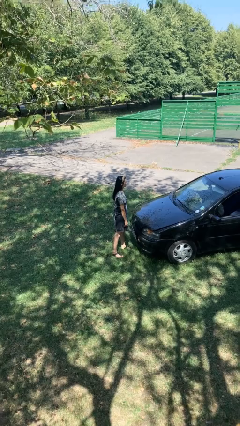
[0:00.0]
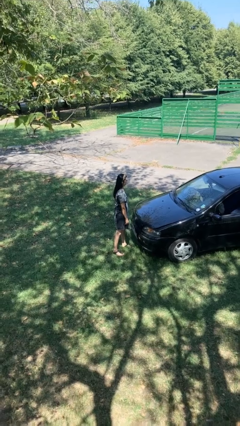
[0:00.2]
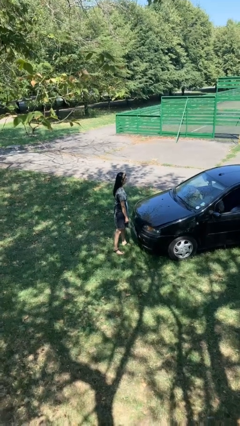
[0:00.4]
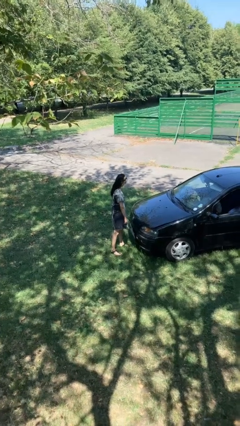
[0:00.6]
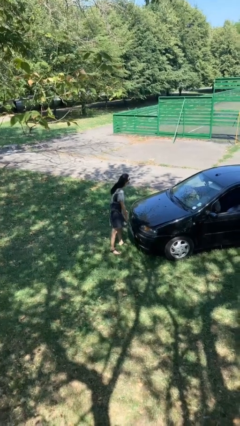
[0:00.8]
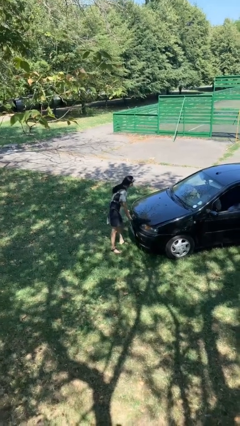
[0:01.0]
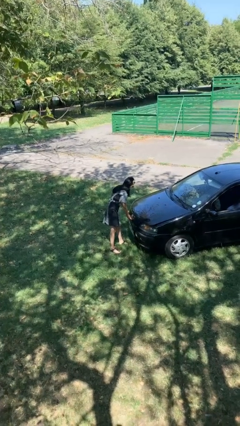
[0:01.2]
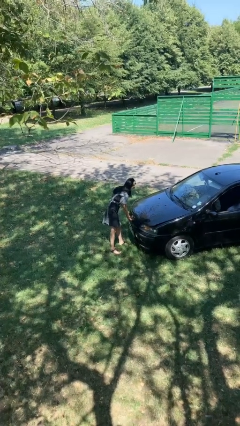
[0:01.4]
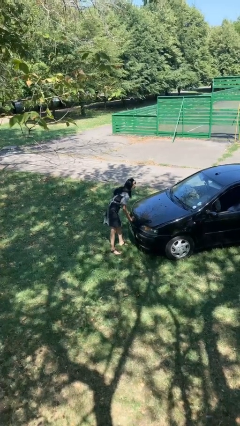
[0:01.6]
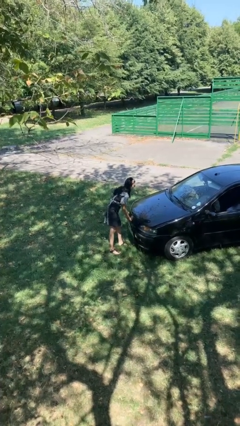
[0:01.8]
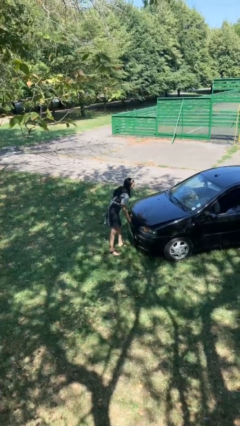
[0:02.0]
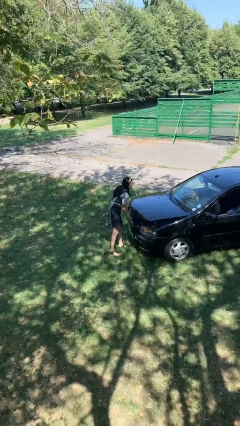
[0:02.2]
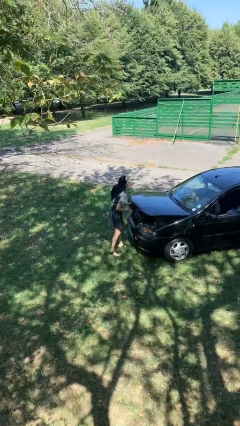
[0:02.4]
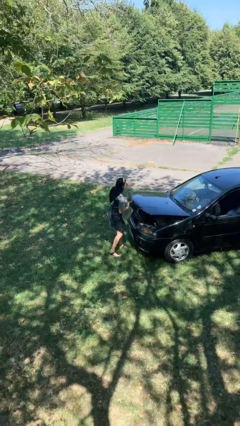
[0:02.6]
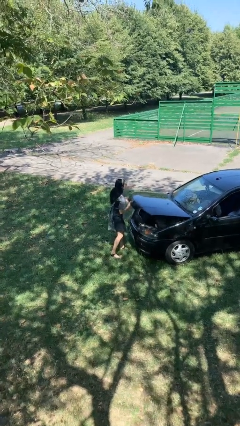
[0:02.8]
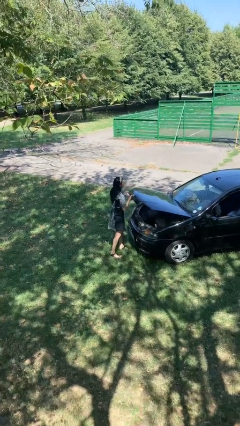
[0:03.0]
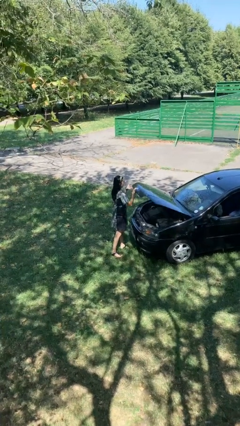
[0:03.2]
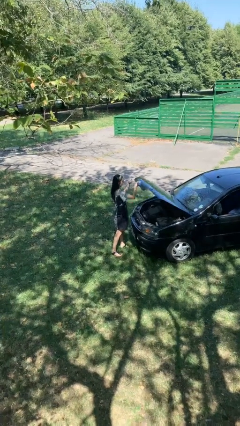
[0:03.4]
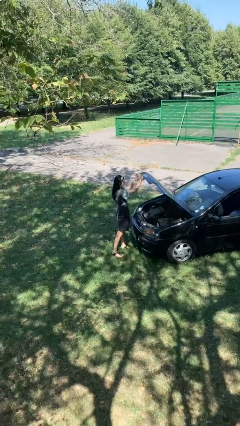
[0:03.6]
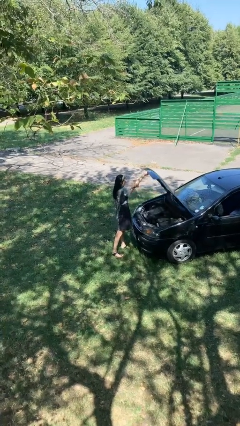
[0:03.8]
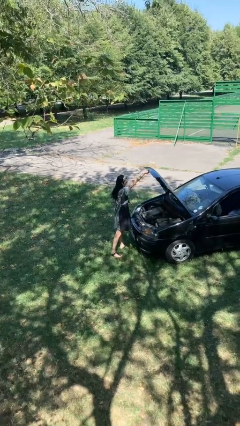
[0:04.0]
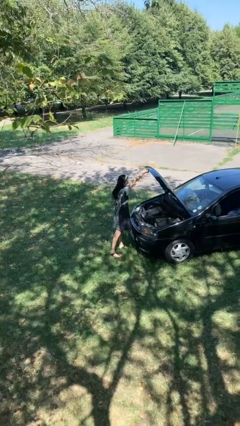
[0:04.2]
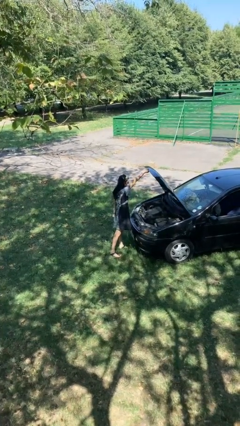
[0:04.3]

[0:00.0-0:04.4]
person opens car hood

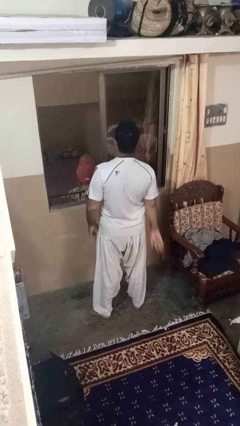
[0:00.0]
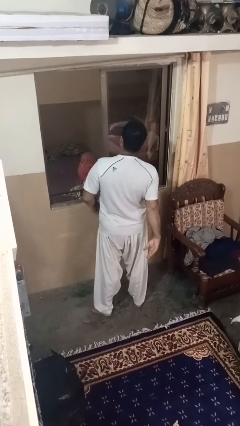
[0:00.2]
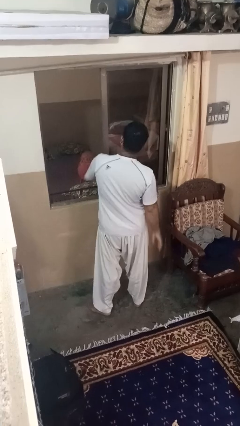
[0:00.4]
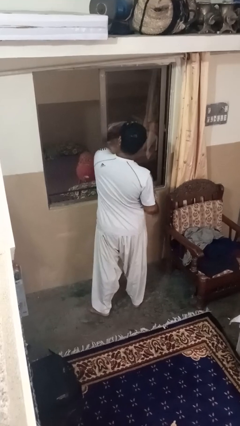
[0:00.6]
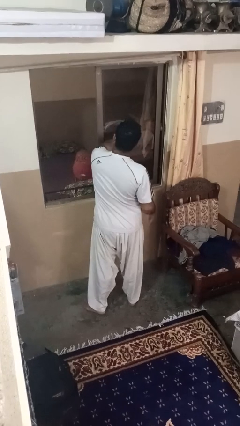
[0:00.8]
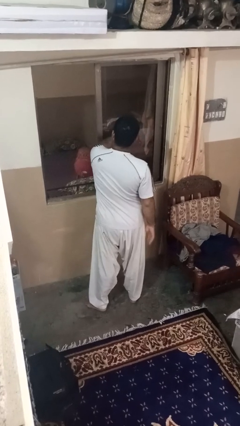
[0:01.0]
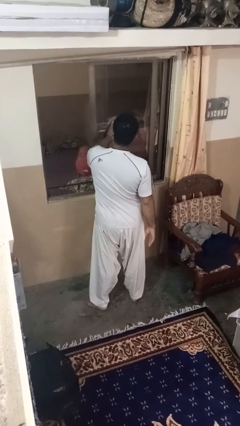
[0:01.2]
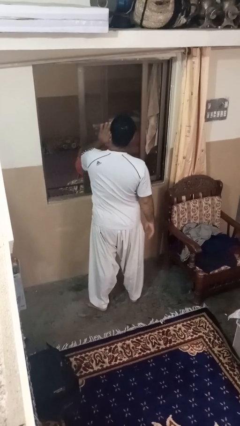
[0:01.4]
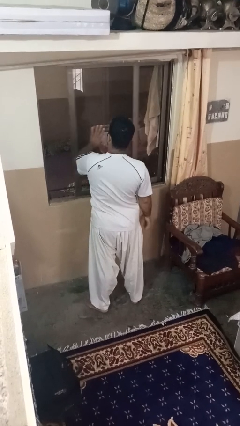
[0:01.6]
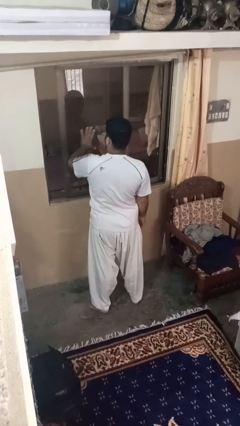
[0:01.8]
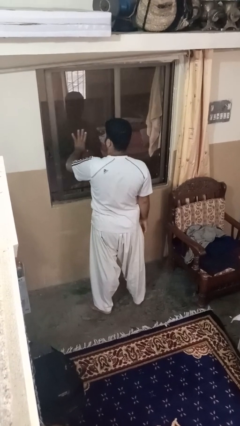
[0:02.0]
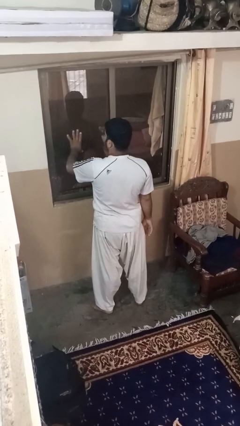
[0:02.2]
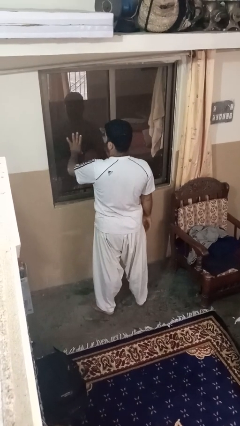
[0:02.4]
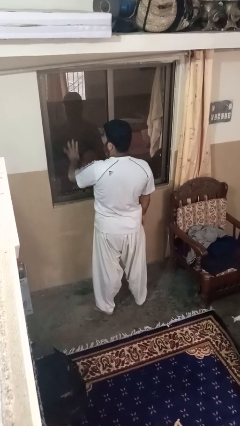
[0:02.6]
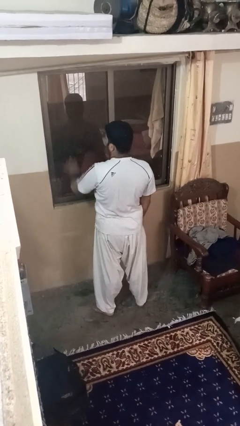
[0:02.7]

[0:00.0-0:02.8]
person closes home window

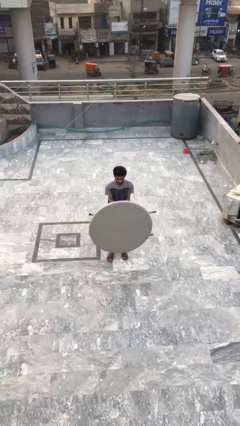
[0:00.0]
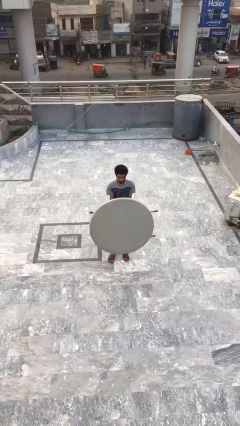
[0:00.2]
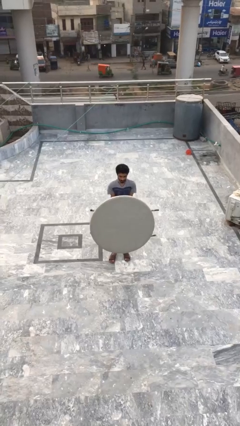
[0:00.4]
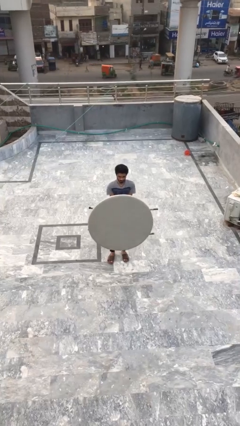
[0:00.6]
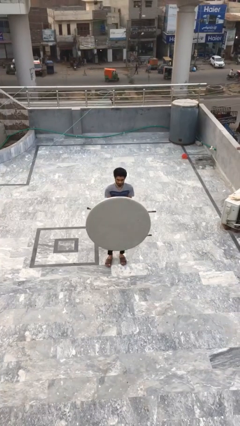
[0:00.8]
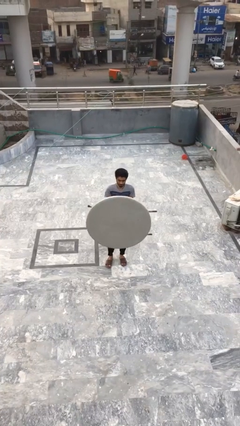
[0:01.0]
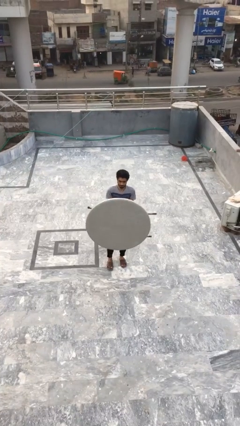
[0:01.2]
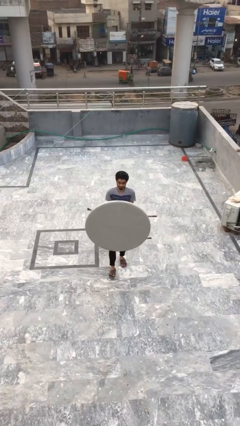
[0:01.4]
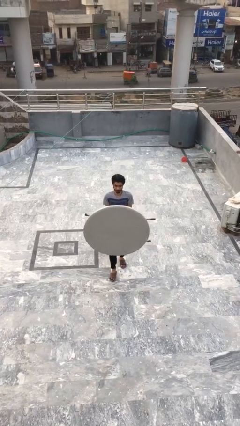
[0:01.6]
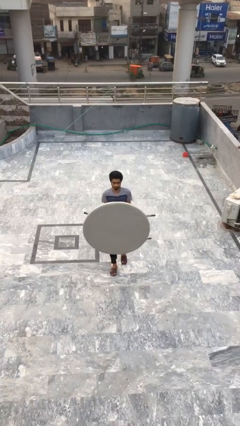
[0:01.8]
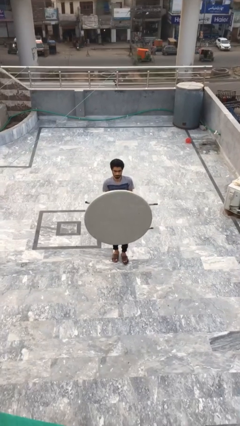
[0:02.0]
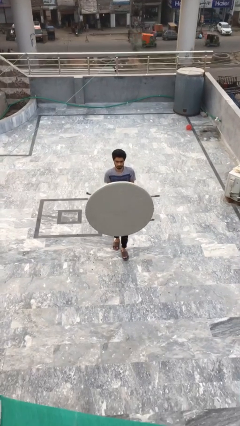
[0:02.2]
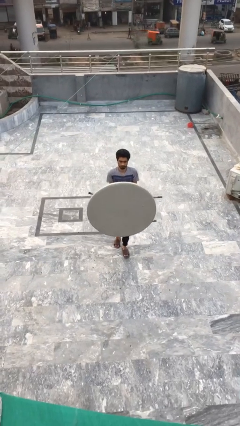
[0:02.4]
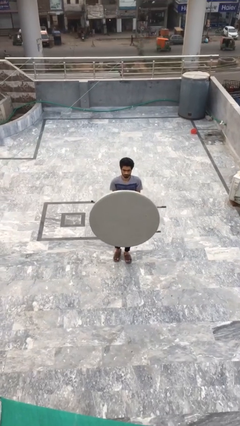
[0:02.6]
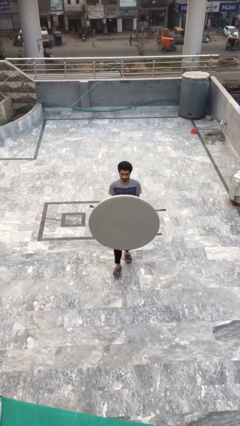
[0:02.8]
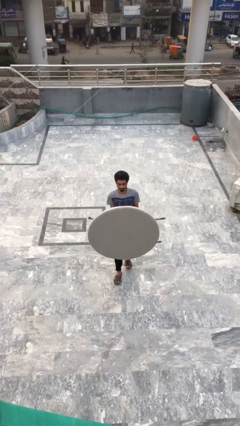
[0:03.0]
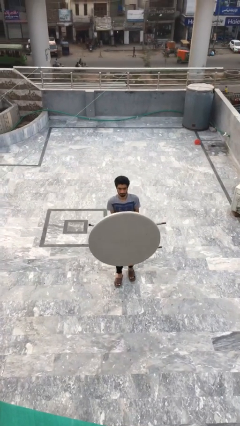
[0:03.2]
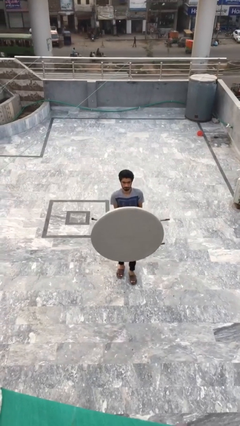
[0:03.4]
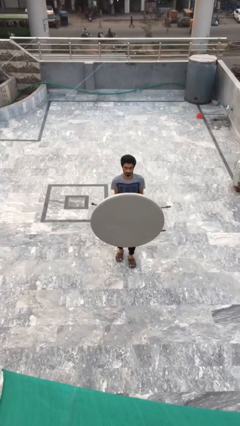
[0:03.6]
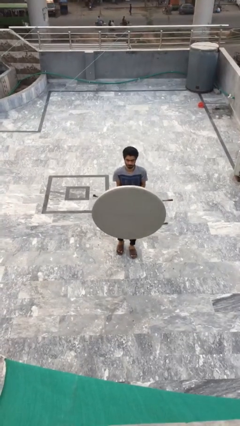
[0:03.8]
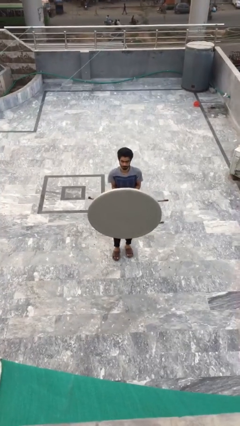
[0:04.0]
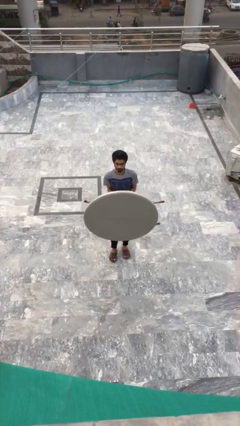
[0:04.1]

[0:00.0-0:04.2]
person carries heavy object

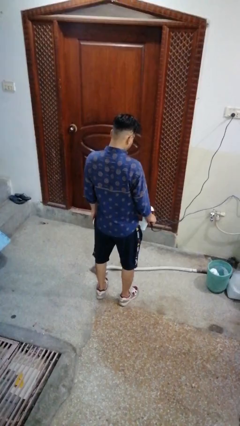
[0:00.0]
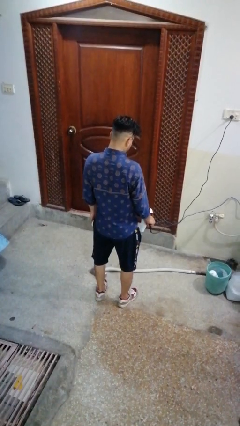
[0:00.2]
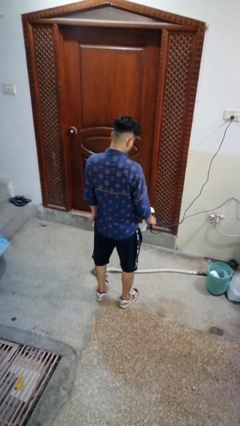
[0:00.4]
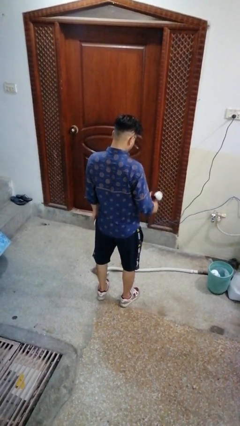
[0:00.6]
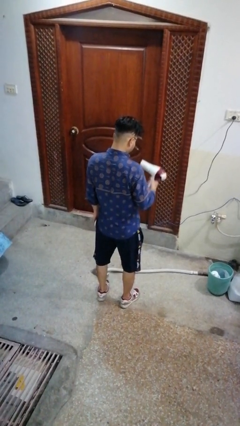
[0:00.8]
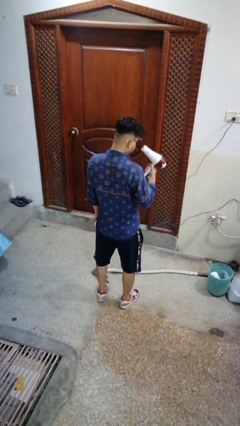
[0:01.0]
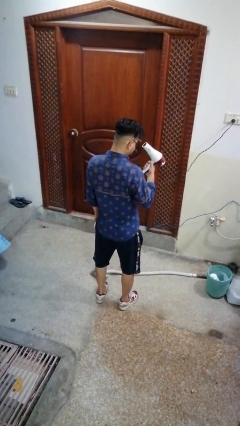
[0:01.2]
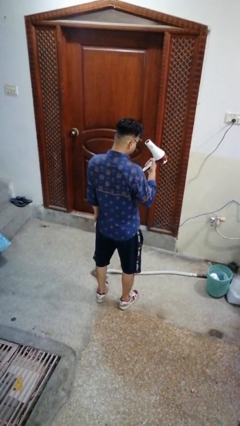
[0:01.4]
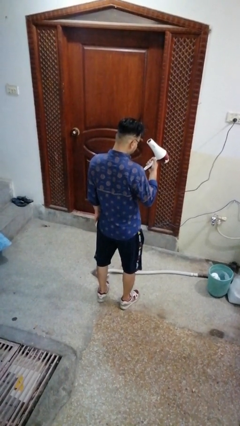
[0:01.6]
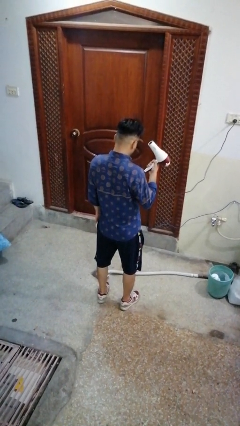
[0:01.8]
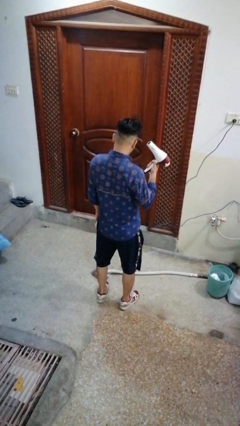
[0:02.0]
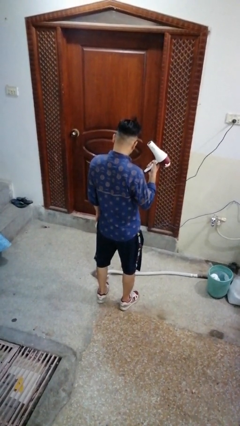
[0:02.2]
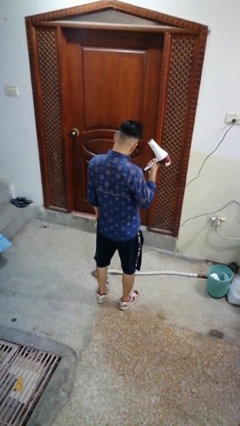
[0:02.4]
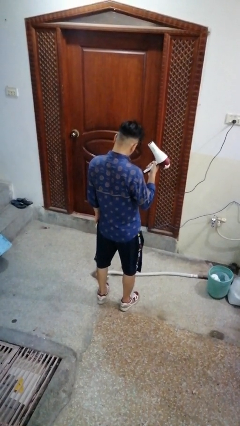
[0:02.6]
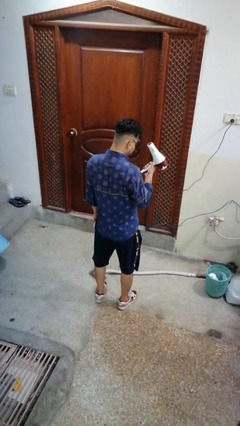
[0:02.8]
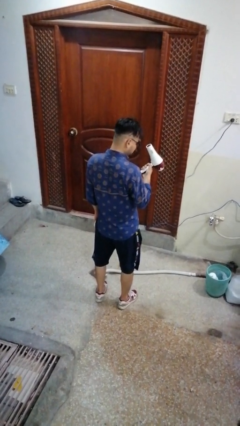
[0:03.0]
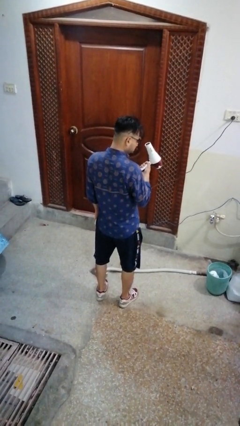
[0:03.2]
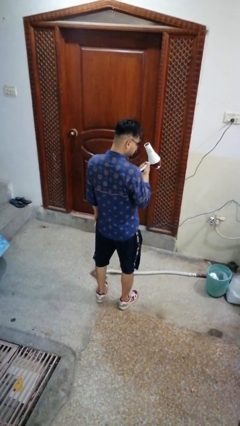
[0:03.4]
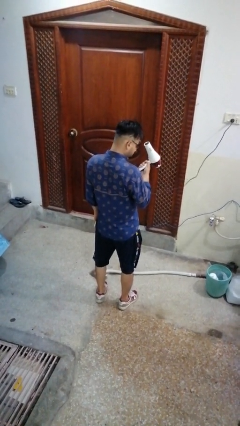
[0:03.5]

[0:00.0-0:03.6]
person dries hair with hairdryer

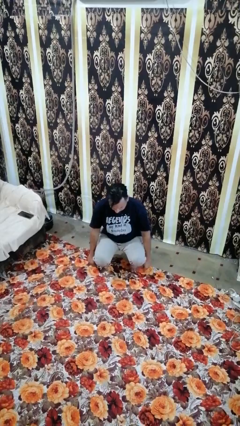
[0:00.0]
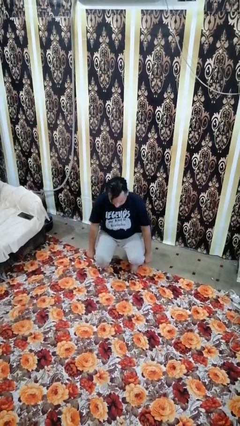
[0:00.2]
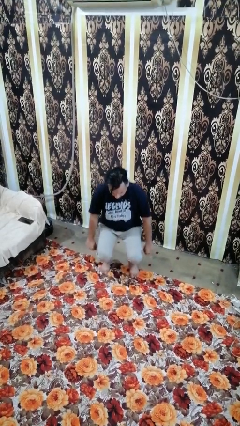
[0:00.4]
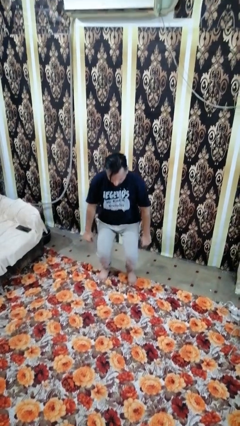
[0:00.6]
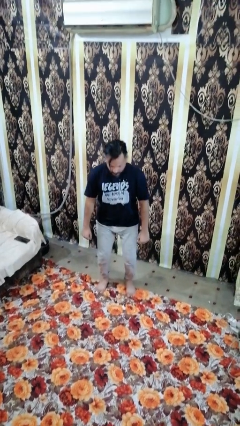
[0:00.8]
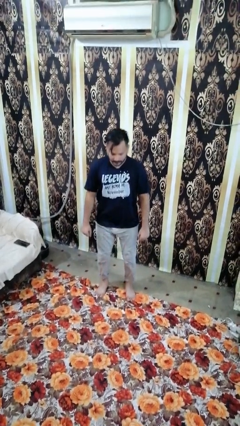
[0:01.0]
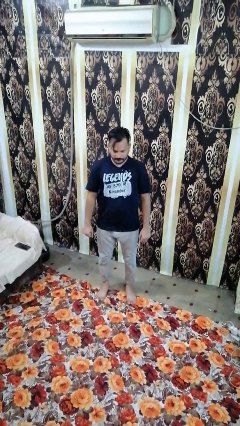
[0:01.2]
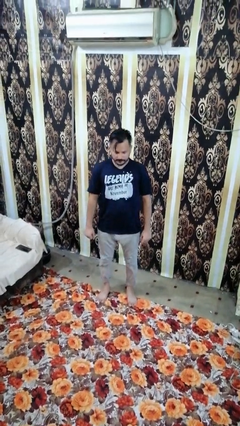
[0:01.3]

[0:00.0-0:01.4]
person stands up

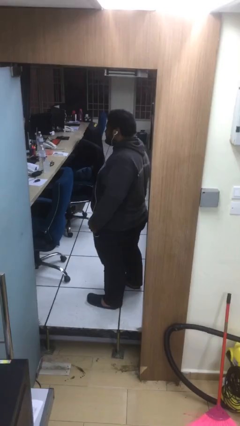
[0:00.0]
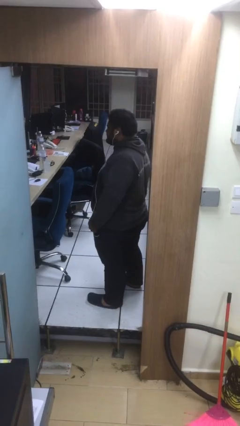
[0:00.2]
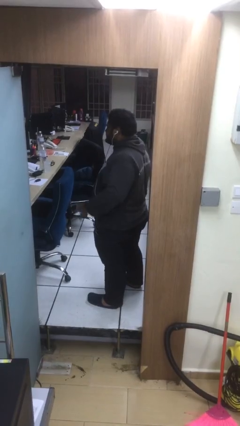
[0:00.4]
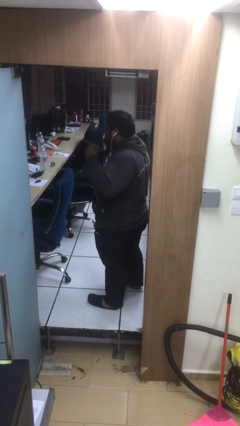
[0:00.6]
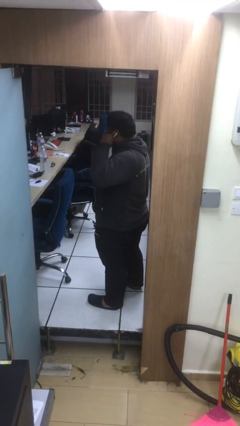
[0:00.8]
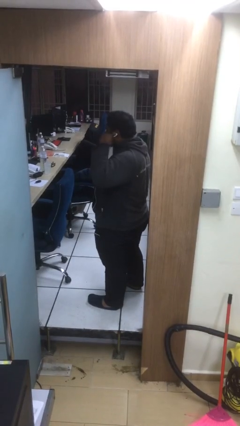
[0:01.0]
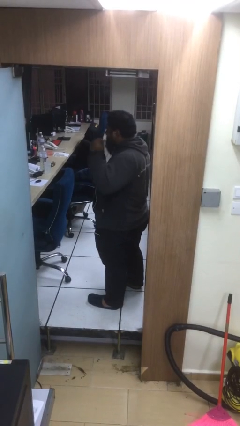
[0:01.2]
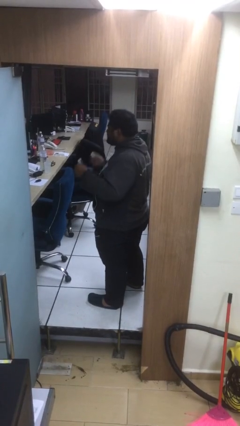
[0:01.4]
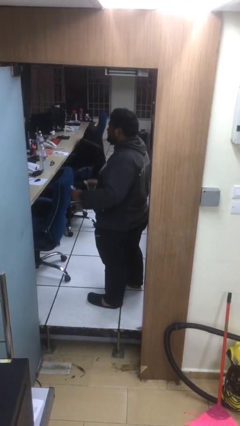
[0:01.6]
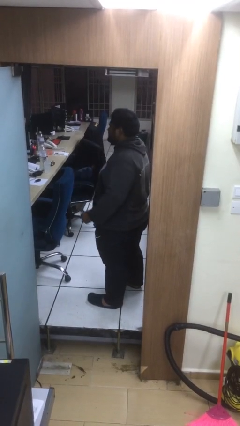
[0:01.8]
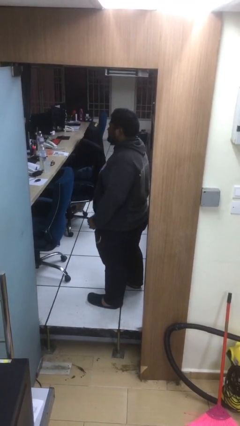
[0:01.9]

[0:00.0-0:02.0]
person takes off headphones
